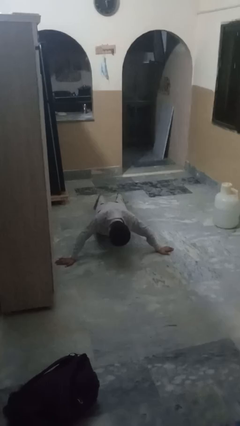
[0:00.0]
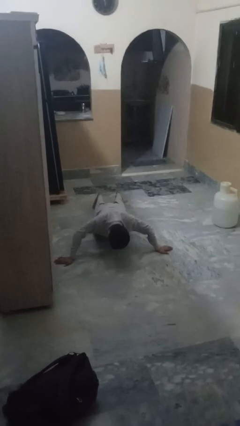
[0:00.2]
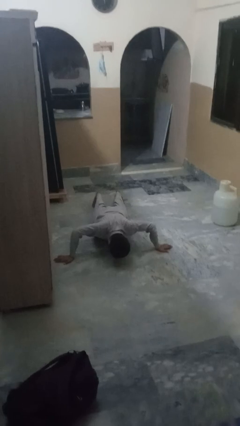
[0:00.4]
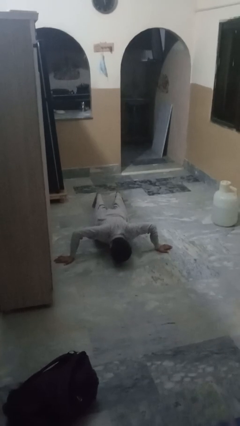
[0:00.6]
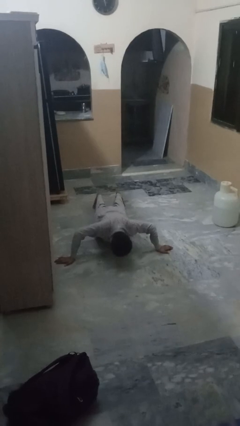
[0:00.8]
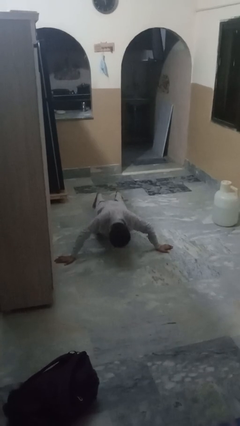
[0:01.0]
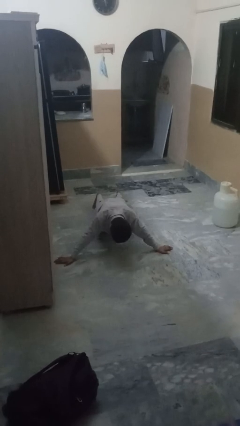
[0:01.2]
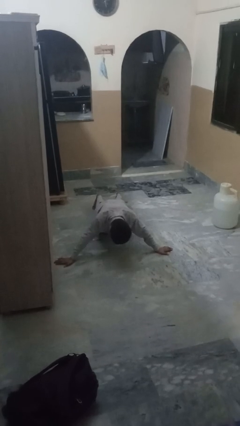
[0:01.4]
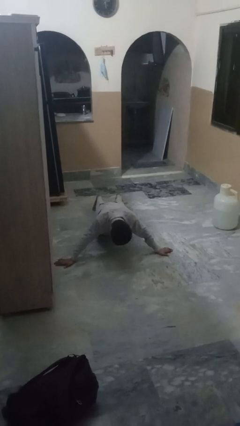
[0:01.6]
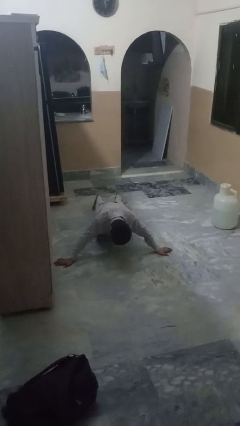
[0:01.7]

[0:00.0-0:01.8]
person exercises with pushup

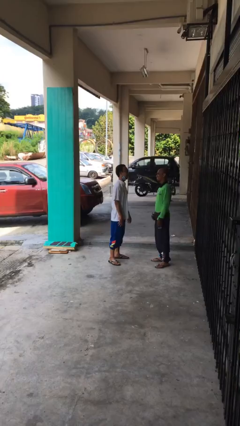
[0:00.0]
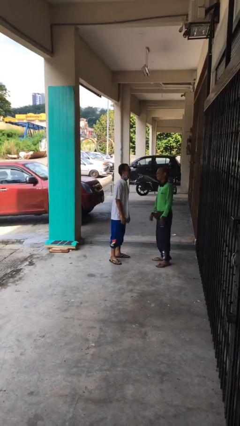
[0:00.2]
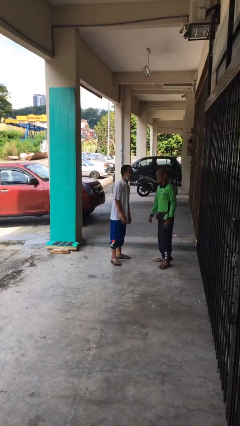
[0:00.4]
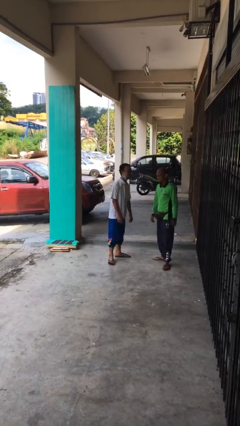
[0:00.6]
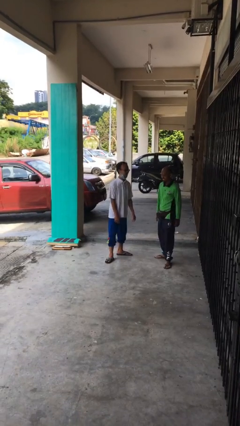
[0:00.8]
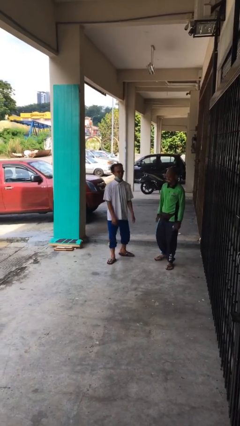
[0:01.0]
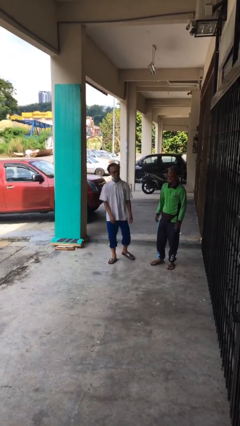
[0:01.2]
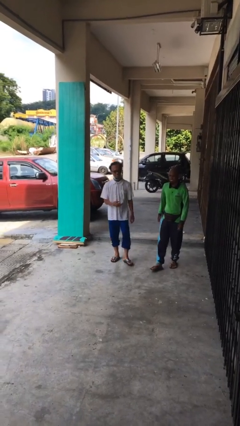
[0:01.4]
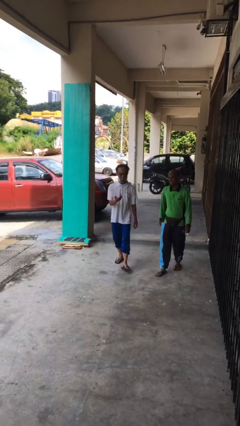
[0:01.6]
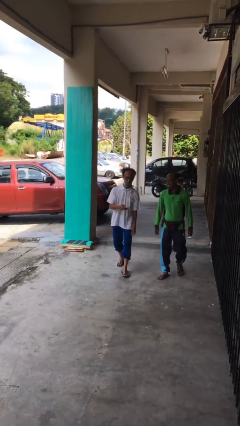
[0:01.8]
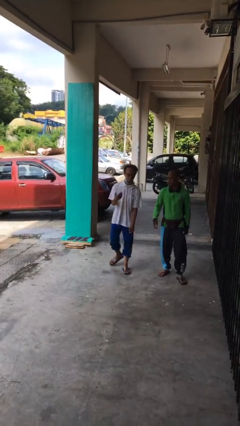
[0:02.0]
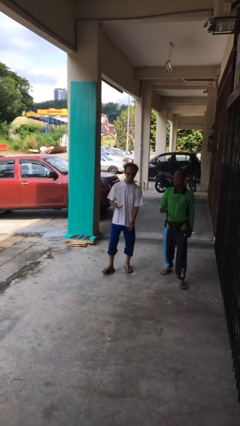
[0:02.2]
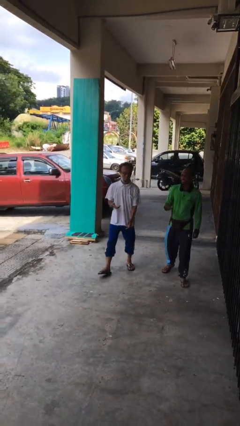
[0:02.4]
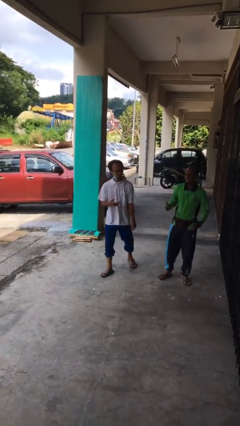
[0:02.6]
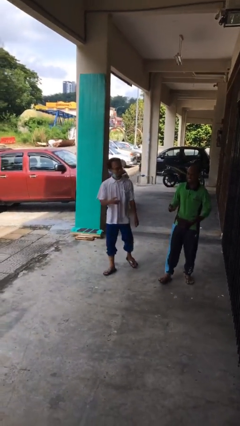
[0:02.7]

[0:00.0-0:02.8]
person talks to person

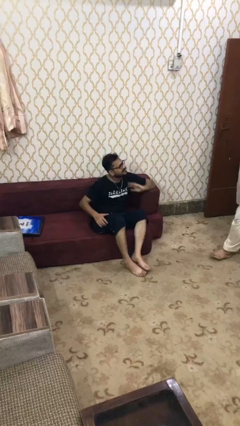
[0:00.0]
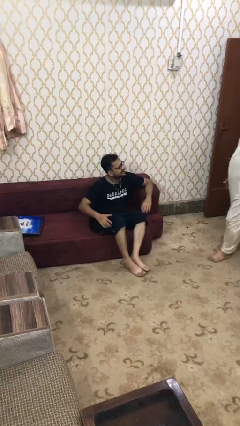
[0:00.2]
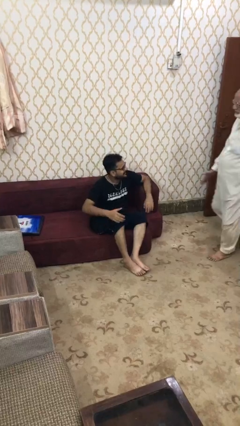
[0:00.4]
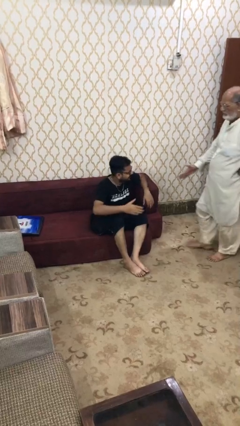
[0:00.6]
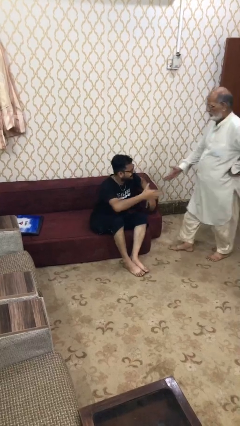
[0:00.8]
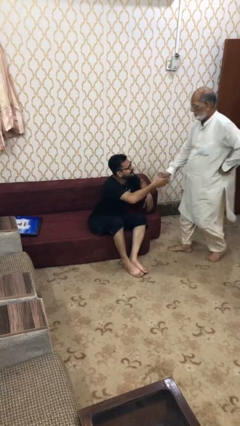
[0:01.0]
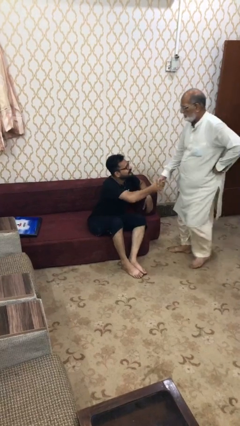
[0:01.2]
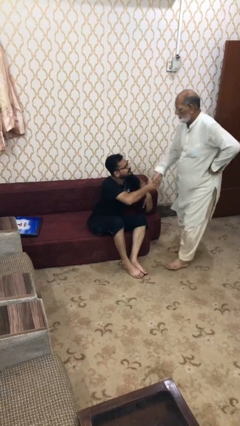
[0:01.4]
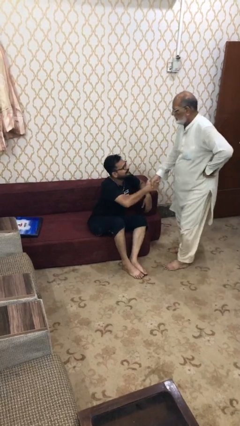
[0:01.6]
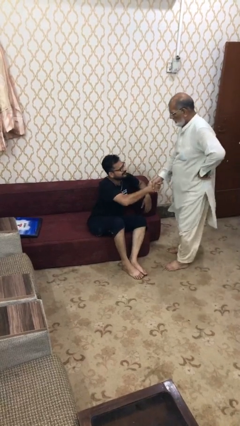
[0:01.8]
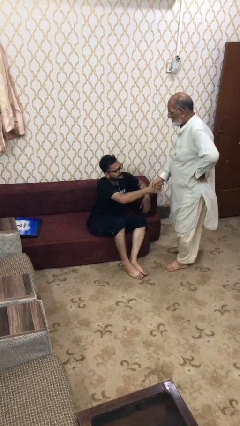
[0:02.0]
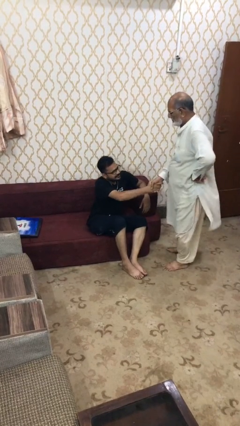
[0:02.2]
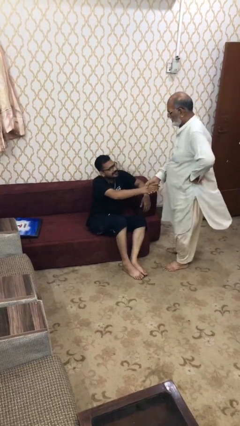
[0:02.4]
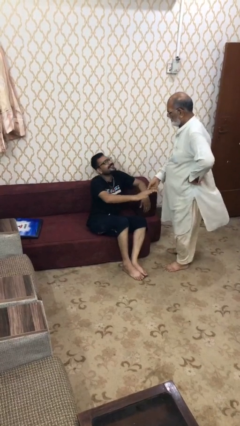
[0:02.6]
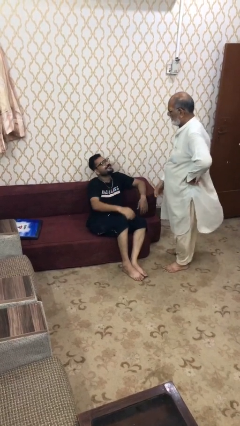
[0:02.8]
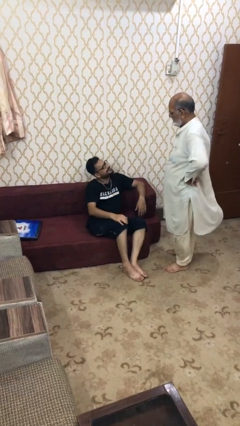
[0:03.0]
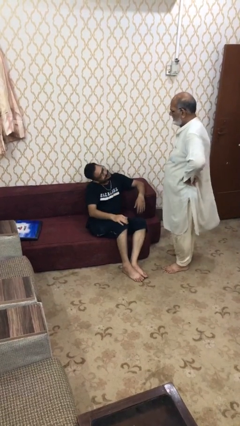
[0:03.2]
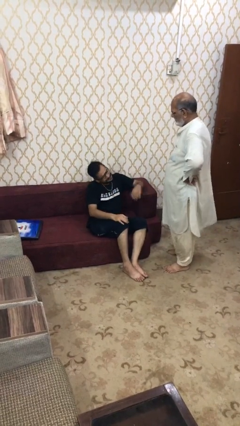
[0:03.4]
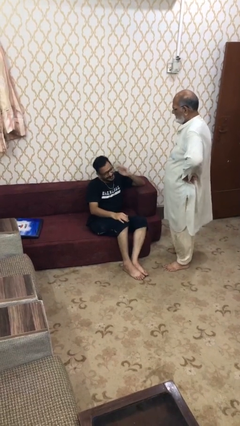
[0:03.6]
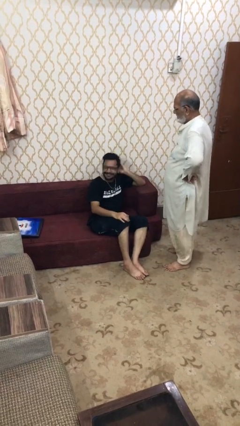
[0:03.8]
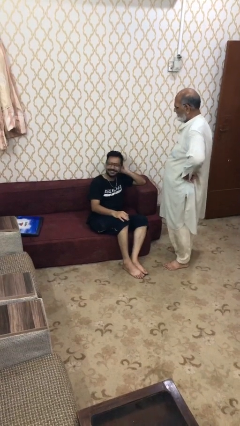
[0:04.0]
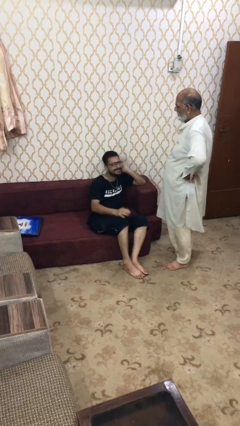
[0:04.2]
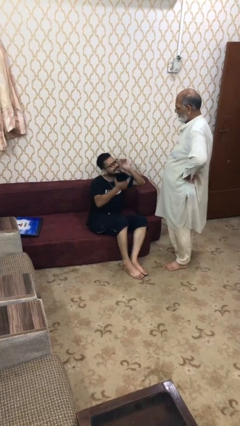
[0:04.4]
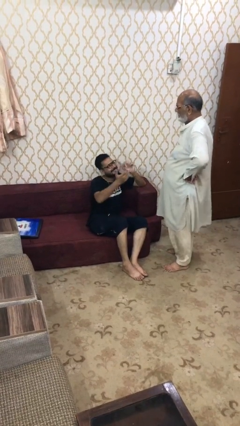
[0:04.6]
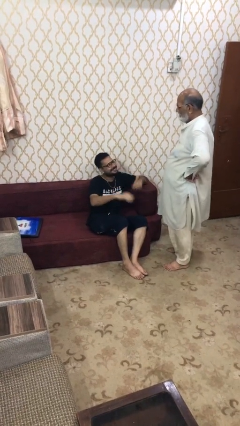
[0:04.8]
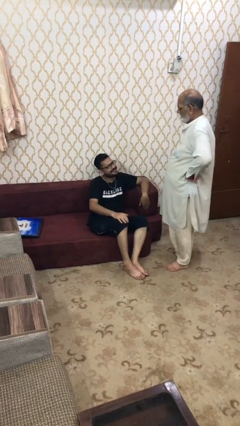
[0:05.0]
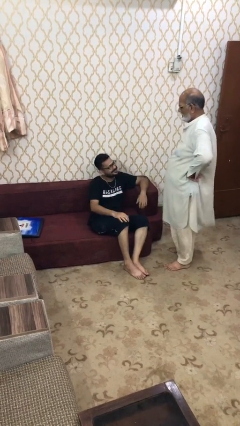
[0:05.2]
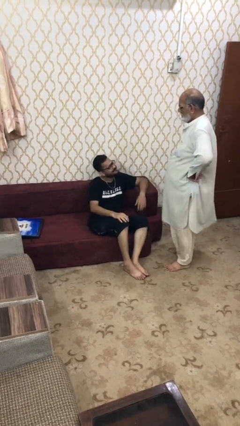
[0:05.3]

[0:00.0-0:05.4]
person shakes hand

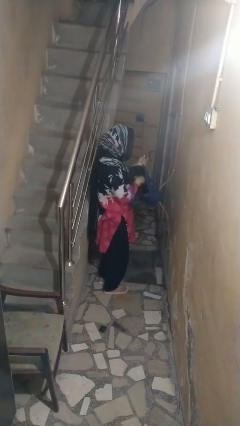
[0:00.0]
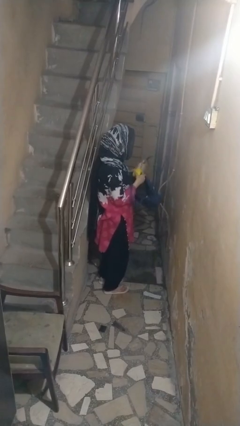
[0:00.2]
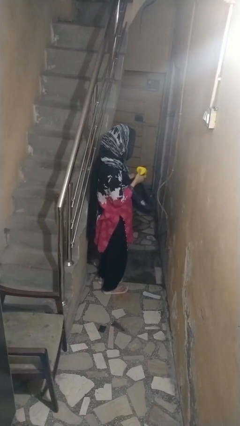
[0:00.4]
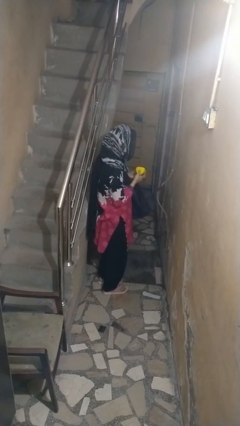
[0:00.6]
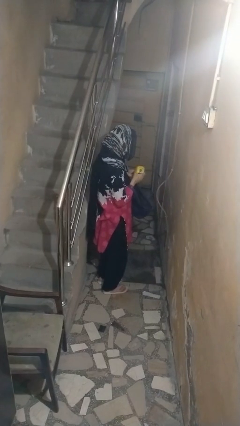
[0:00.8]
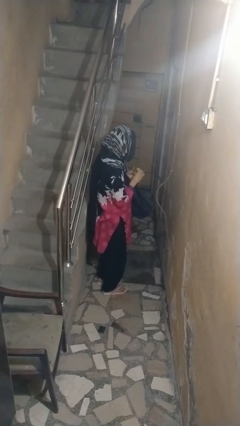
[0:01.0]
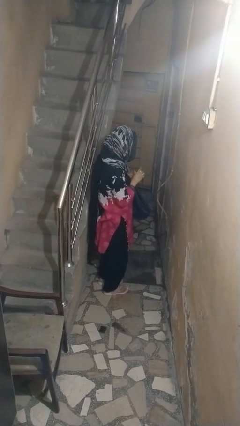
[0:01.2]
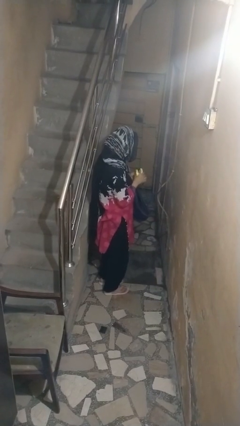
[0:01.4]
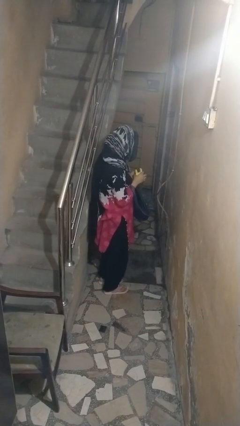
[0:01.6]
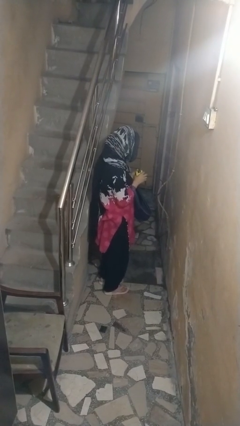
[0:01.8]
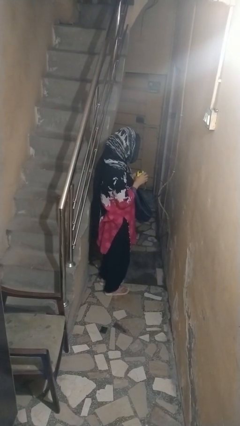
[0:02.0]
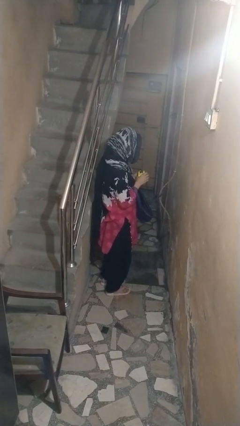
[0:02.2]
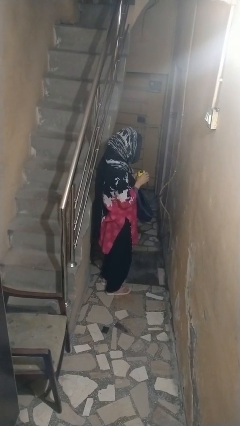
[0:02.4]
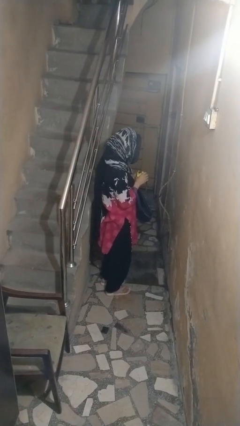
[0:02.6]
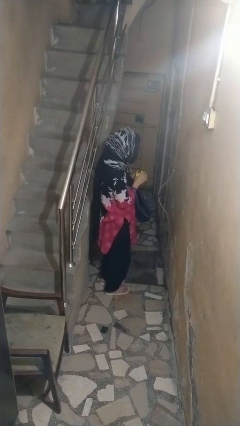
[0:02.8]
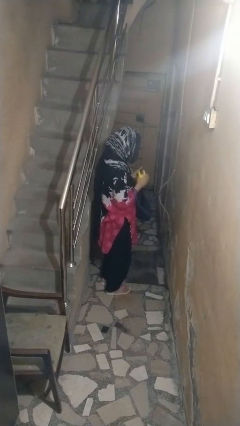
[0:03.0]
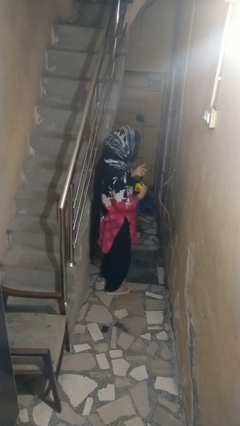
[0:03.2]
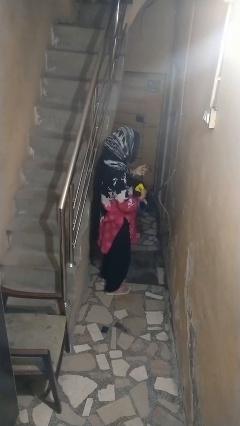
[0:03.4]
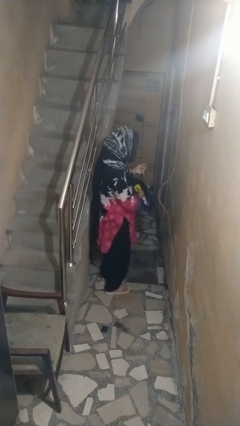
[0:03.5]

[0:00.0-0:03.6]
person takes object from purse

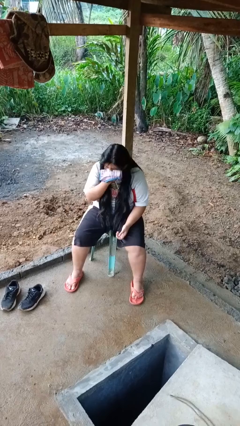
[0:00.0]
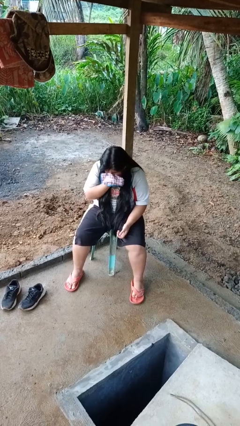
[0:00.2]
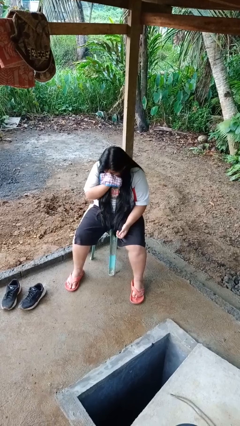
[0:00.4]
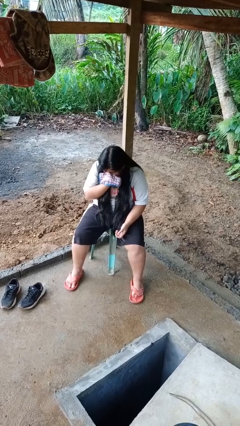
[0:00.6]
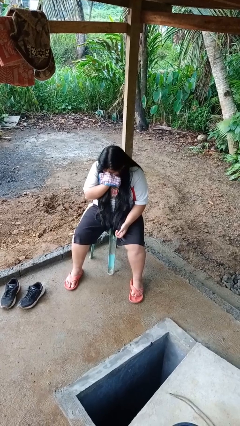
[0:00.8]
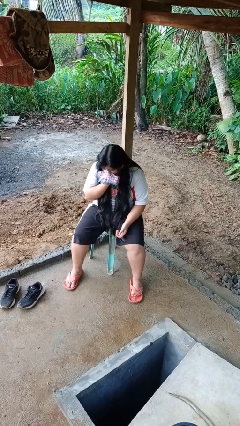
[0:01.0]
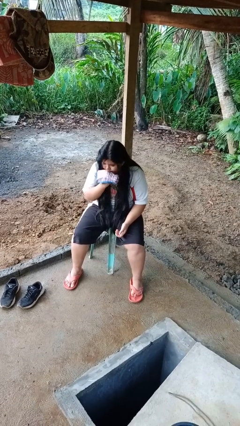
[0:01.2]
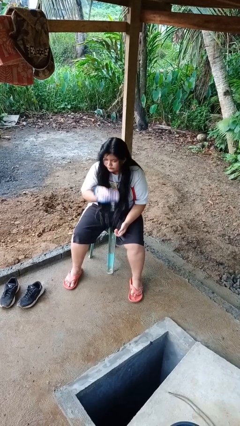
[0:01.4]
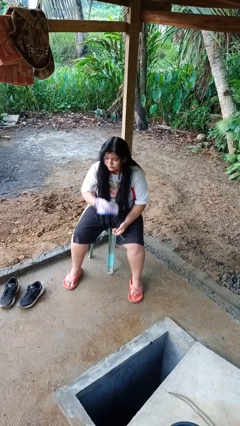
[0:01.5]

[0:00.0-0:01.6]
person blows nose

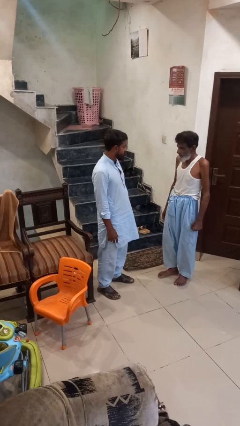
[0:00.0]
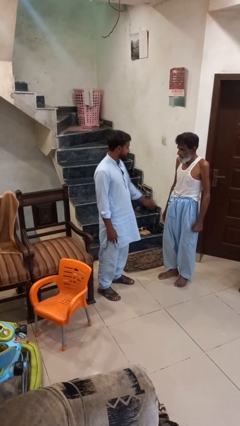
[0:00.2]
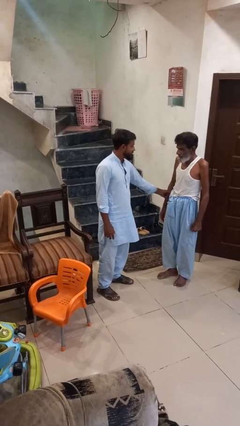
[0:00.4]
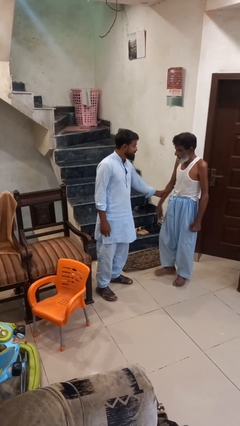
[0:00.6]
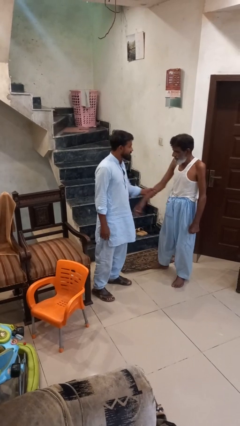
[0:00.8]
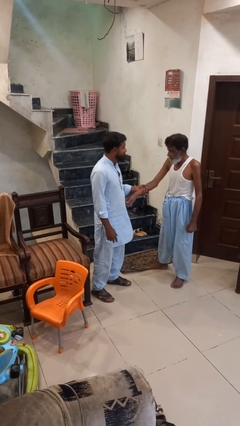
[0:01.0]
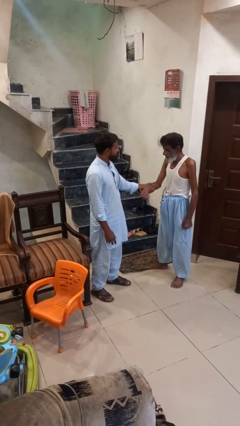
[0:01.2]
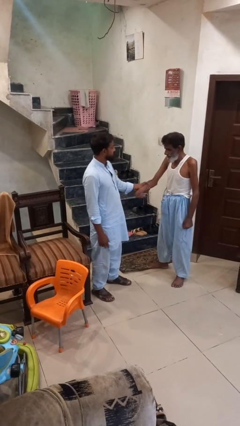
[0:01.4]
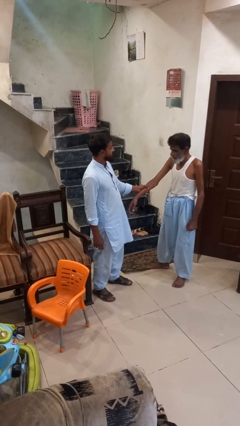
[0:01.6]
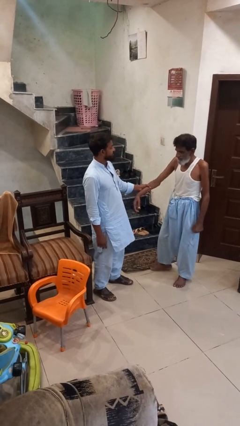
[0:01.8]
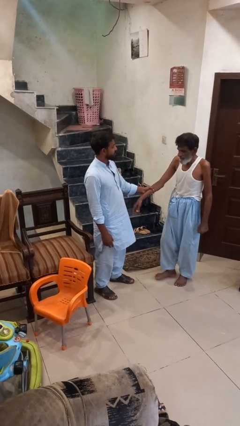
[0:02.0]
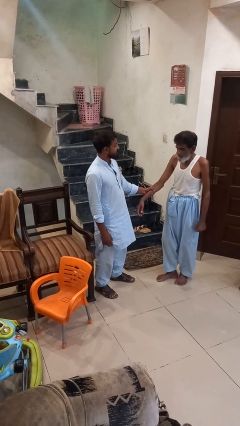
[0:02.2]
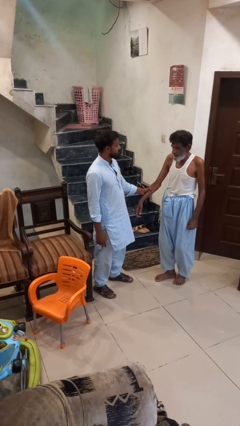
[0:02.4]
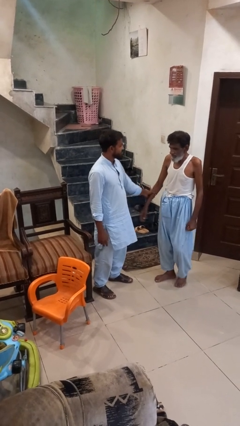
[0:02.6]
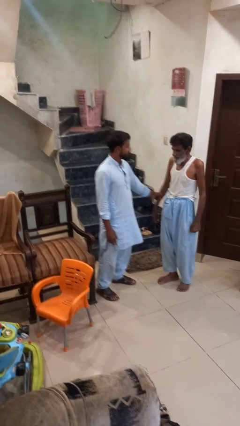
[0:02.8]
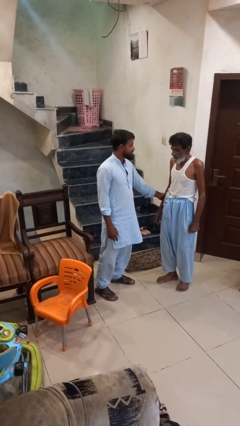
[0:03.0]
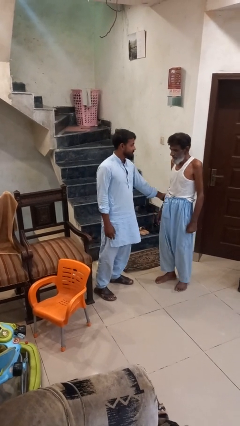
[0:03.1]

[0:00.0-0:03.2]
person grabs person by forearm
